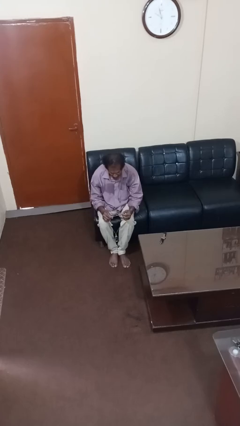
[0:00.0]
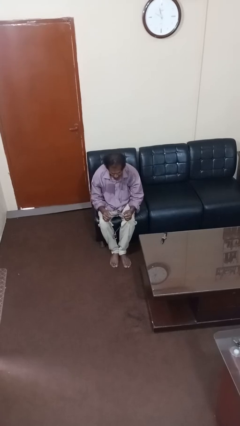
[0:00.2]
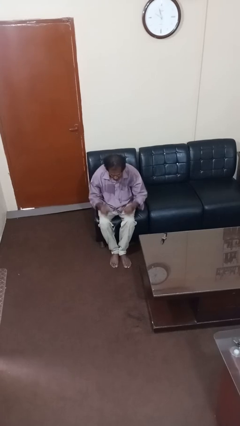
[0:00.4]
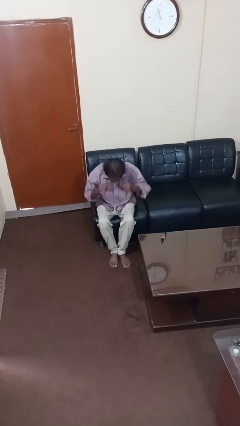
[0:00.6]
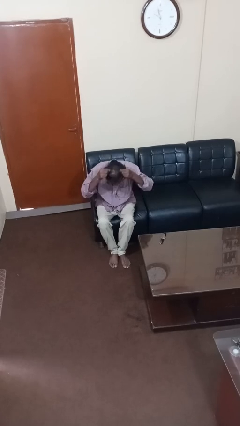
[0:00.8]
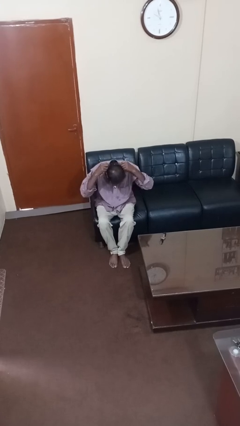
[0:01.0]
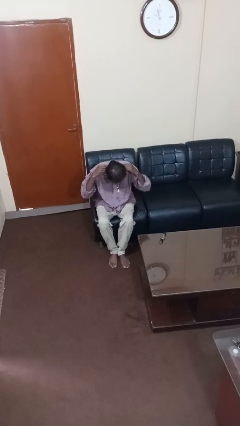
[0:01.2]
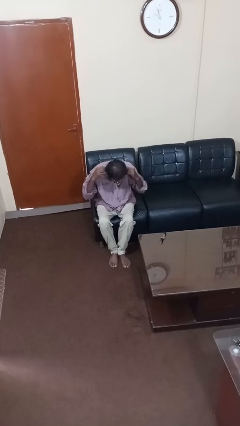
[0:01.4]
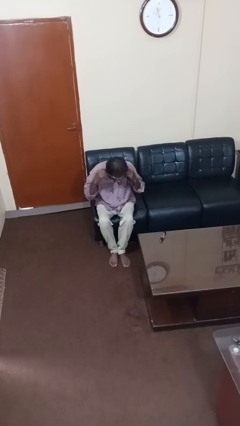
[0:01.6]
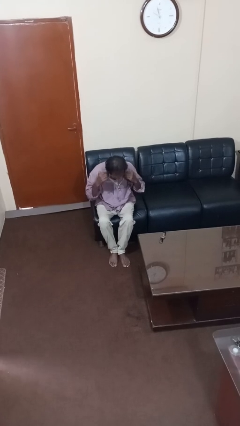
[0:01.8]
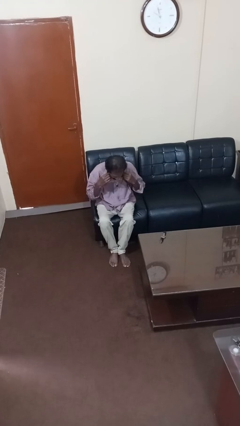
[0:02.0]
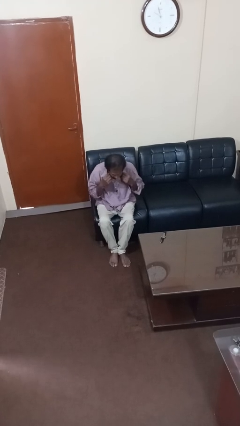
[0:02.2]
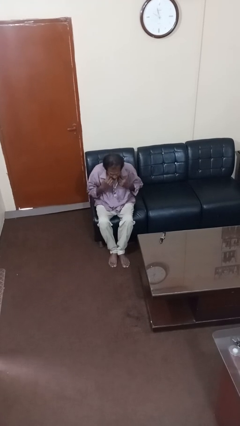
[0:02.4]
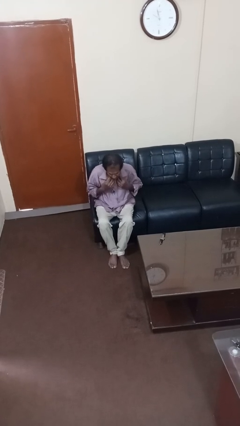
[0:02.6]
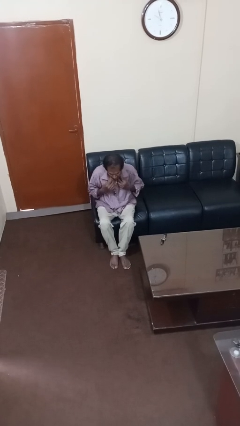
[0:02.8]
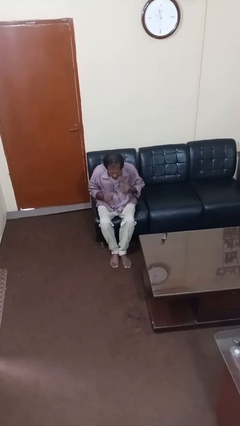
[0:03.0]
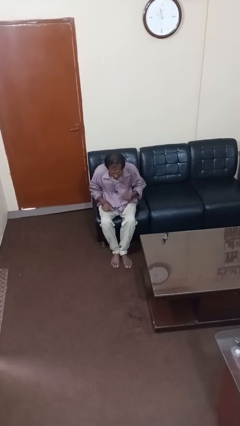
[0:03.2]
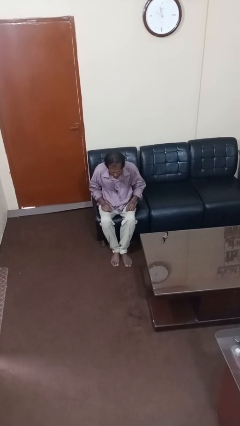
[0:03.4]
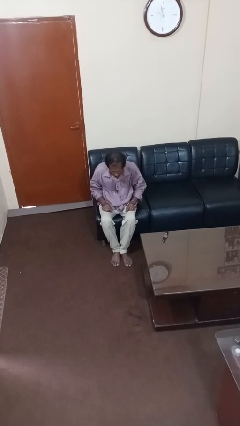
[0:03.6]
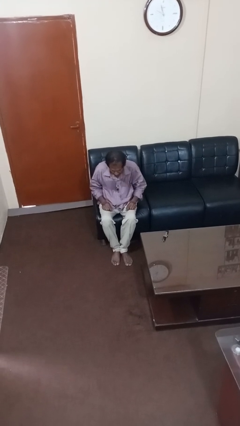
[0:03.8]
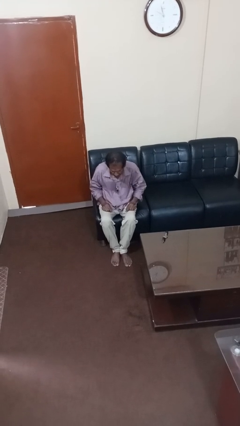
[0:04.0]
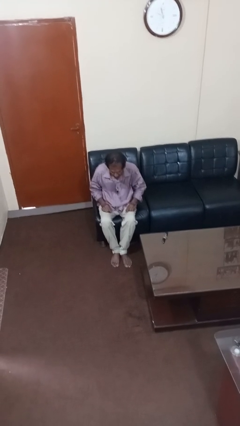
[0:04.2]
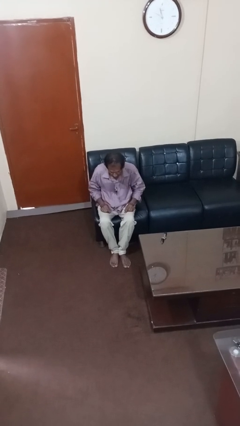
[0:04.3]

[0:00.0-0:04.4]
person puts on necklace

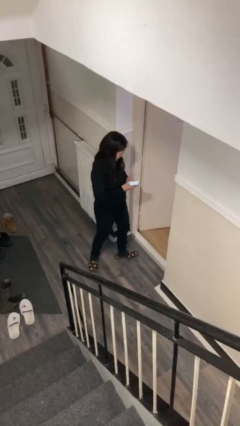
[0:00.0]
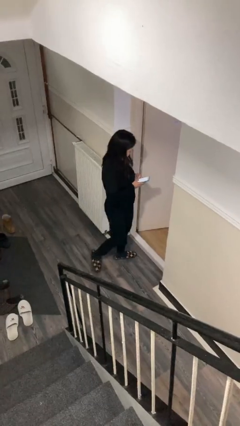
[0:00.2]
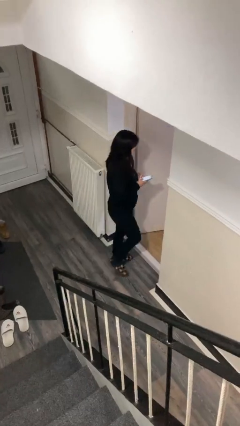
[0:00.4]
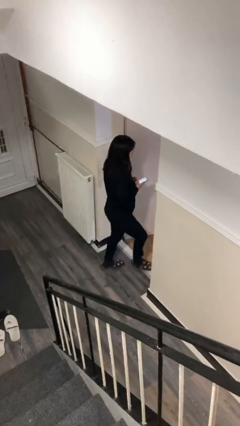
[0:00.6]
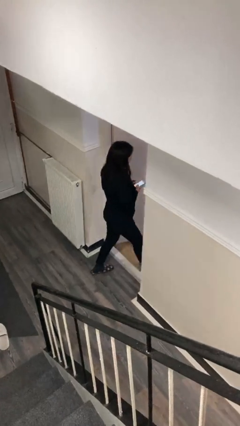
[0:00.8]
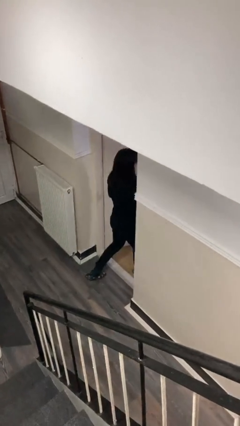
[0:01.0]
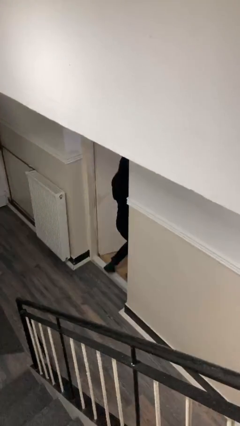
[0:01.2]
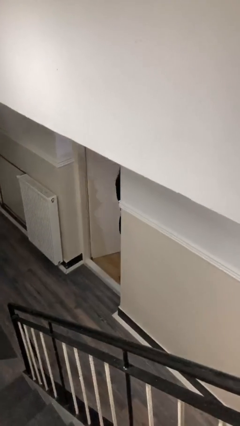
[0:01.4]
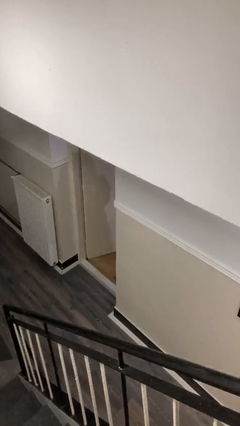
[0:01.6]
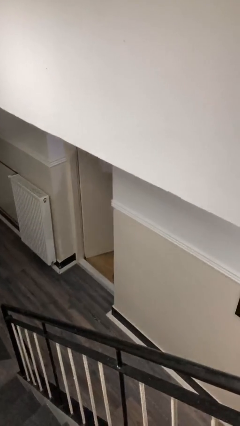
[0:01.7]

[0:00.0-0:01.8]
person exits scene through structure

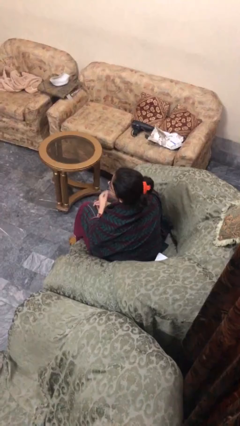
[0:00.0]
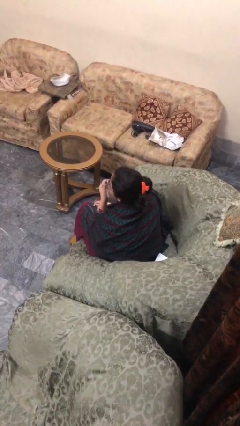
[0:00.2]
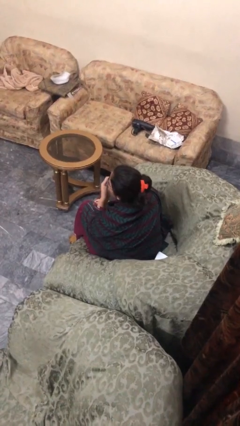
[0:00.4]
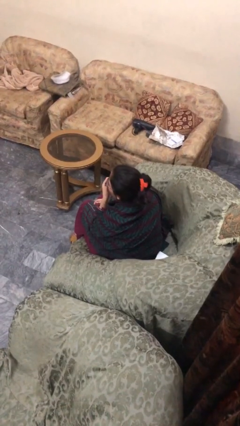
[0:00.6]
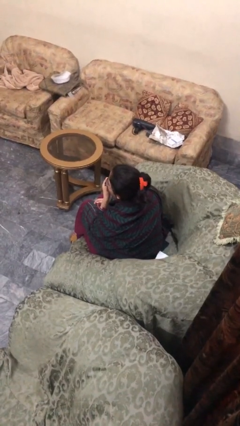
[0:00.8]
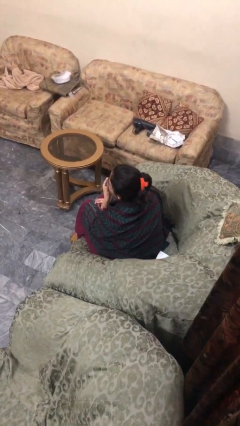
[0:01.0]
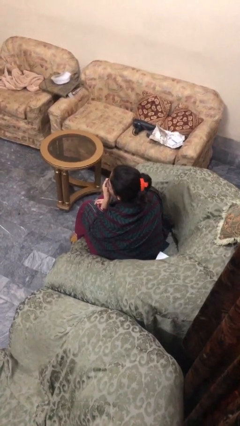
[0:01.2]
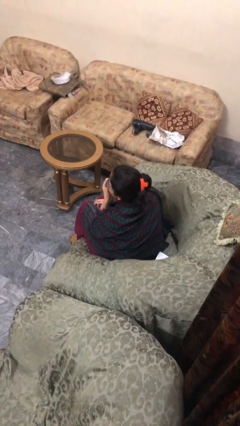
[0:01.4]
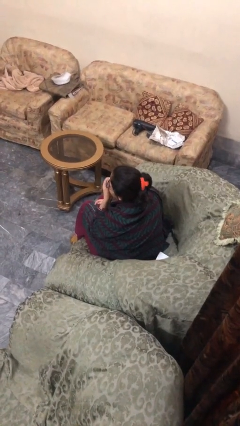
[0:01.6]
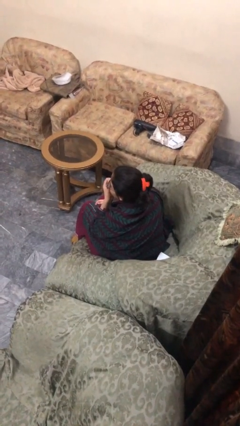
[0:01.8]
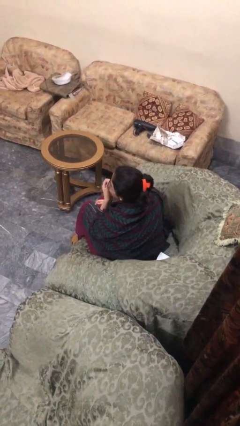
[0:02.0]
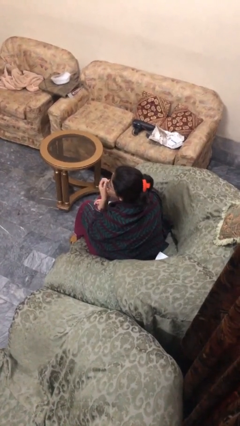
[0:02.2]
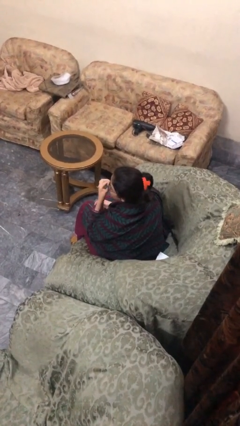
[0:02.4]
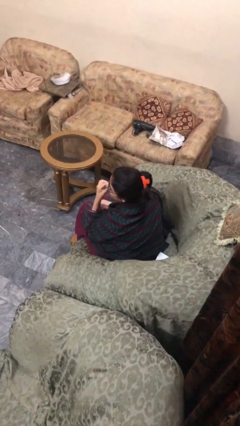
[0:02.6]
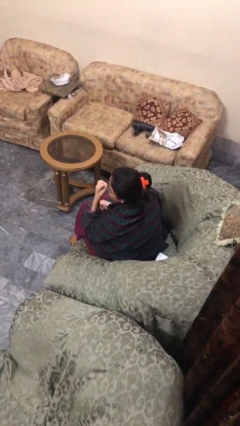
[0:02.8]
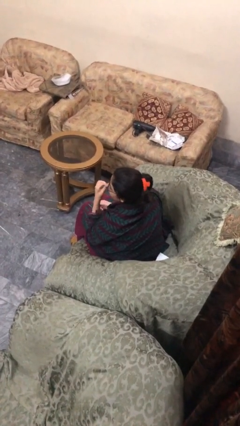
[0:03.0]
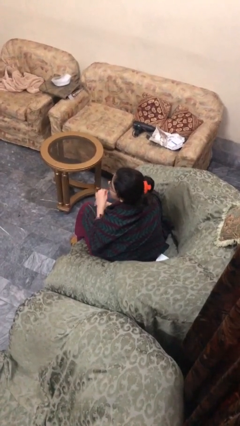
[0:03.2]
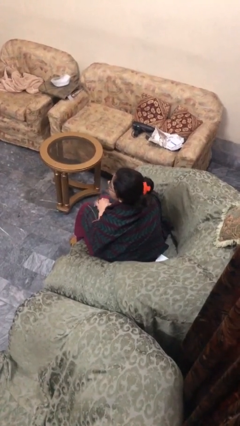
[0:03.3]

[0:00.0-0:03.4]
person blows nose

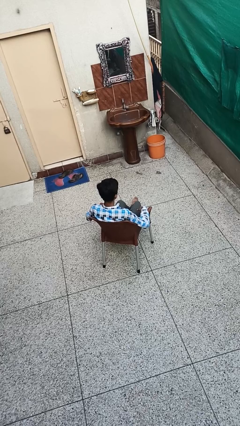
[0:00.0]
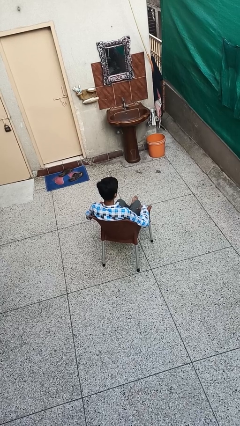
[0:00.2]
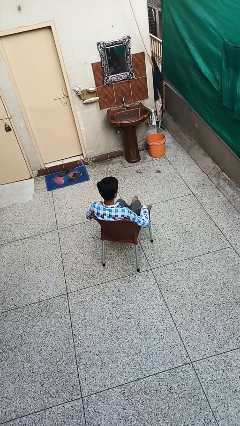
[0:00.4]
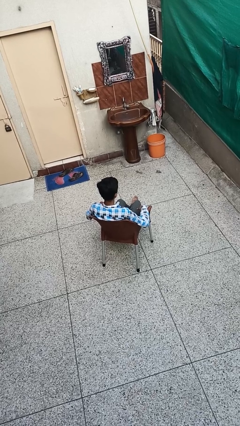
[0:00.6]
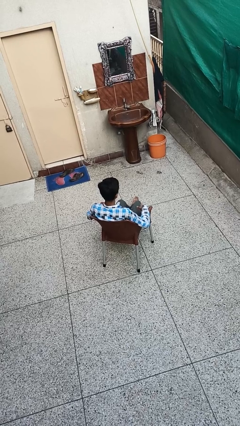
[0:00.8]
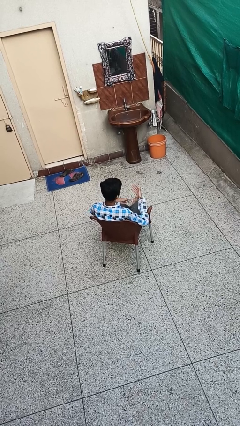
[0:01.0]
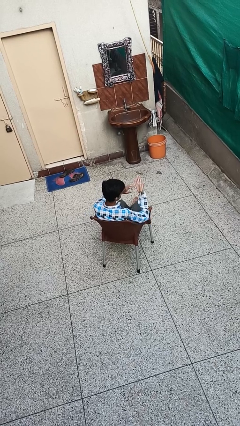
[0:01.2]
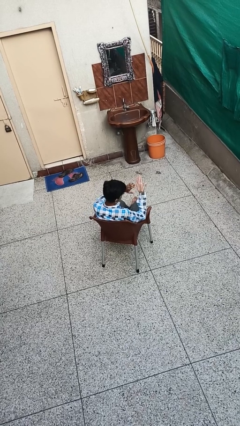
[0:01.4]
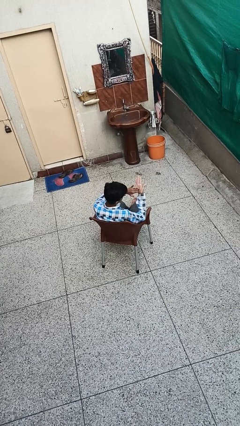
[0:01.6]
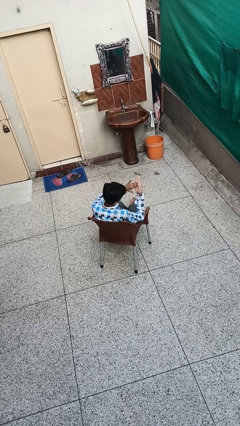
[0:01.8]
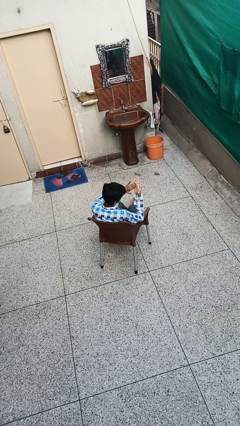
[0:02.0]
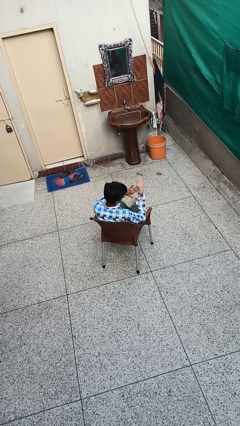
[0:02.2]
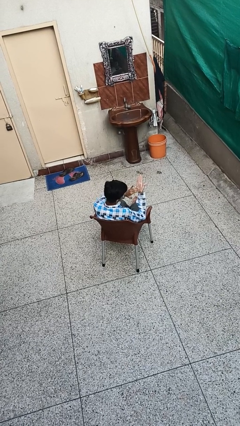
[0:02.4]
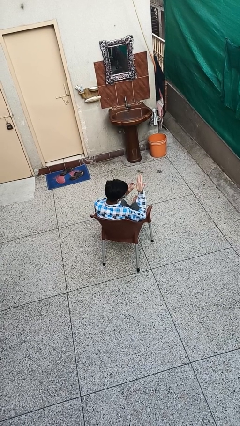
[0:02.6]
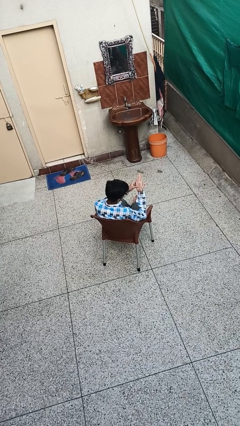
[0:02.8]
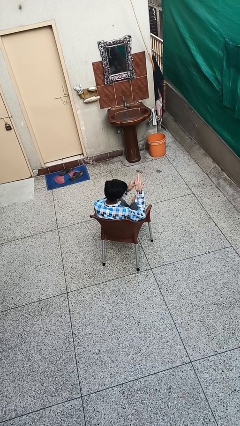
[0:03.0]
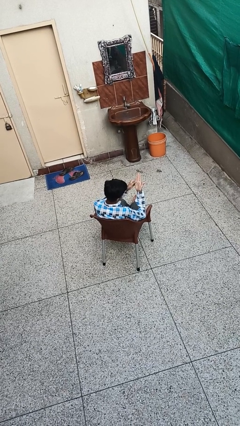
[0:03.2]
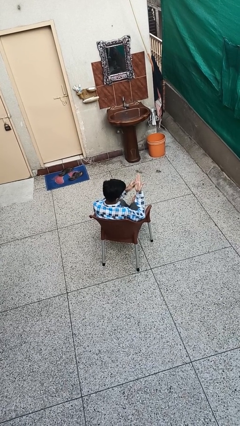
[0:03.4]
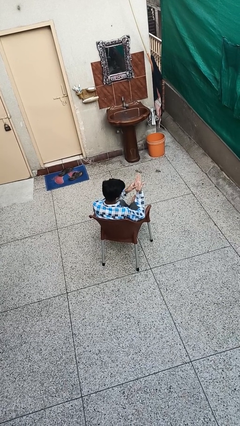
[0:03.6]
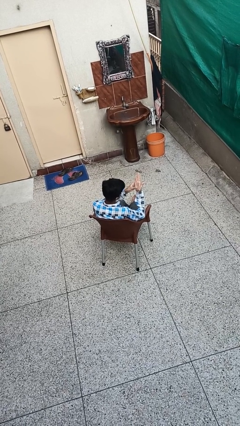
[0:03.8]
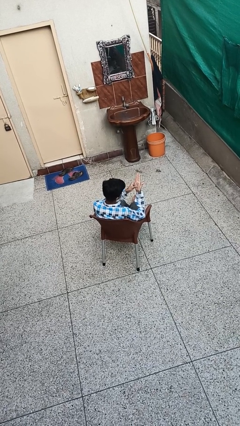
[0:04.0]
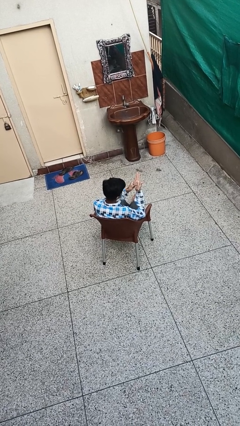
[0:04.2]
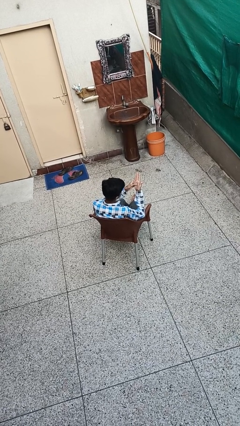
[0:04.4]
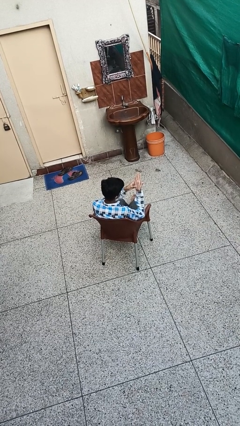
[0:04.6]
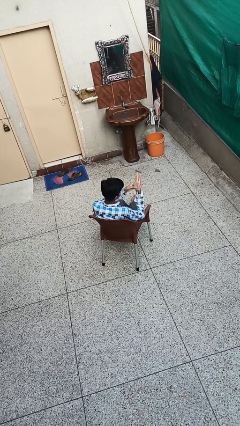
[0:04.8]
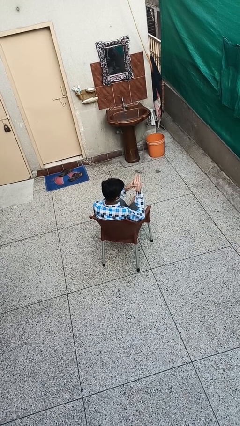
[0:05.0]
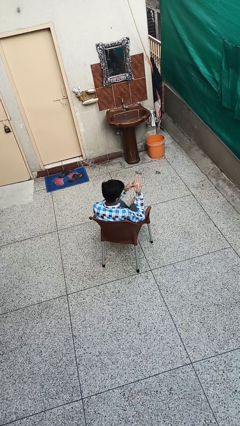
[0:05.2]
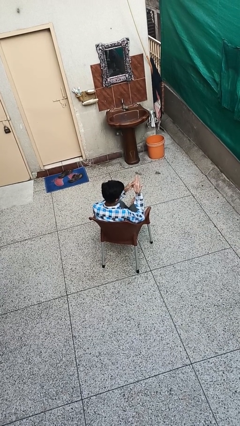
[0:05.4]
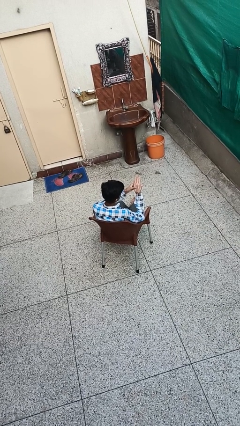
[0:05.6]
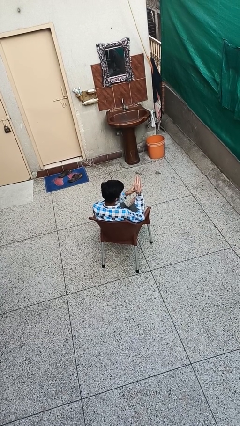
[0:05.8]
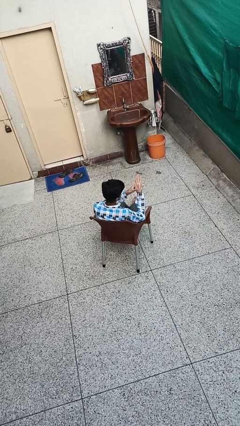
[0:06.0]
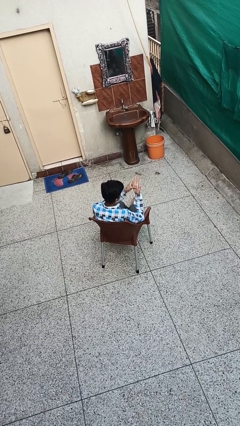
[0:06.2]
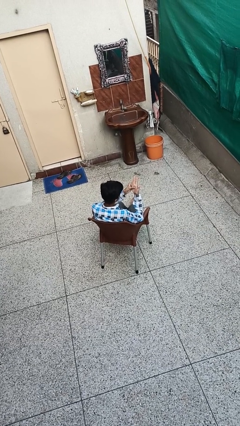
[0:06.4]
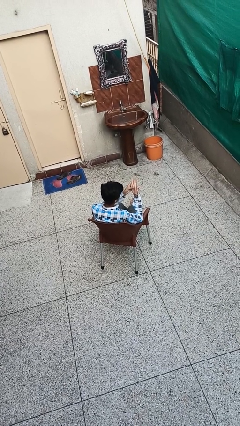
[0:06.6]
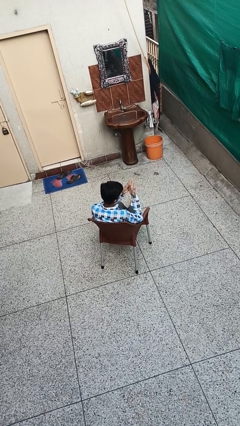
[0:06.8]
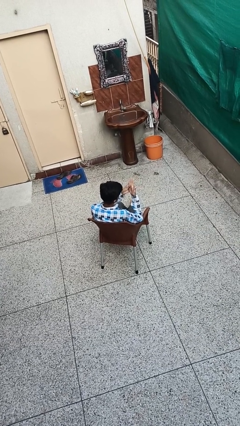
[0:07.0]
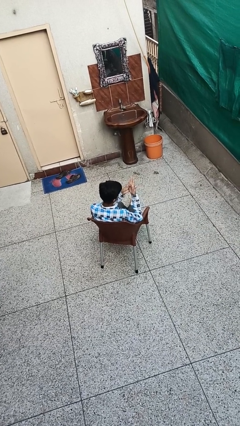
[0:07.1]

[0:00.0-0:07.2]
person looks at hands in lap

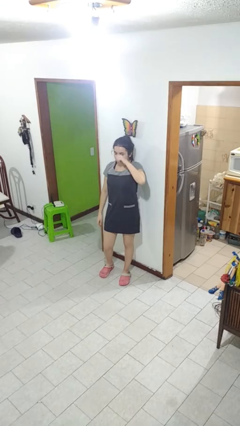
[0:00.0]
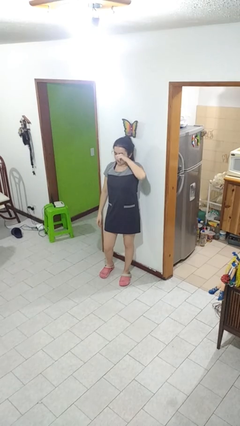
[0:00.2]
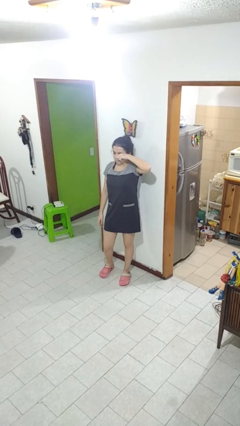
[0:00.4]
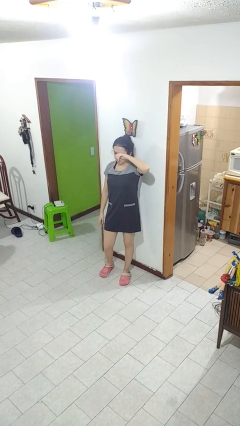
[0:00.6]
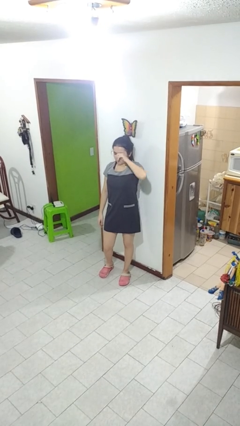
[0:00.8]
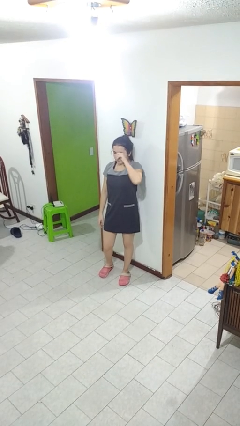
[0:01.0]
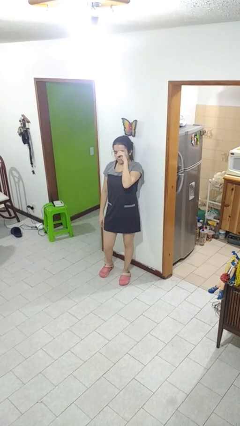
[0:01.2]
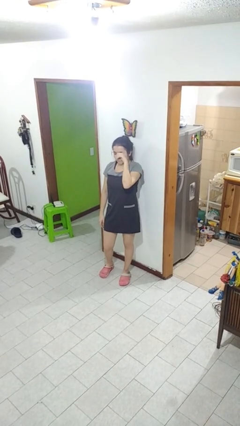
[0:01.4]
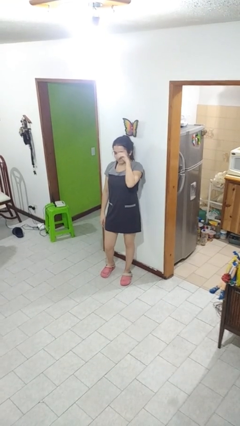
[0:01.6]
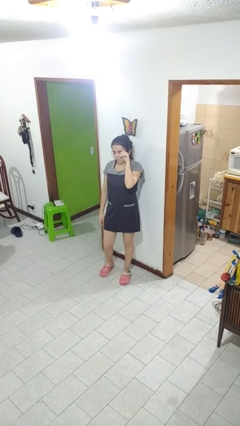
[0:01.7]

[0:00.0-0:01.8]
person rubs eyes
